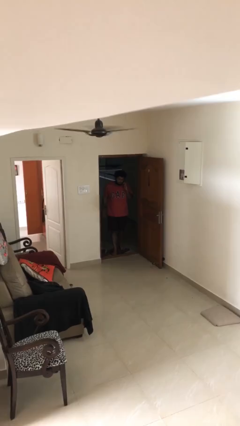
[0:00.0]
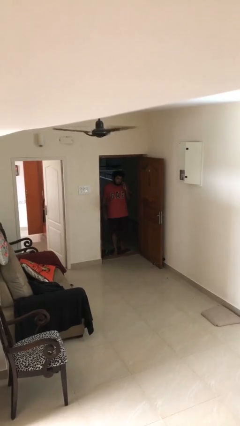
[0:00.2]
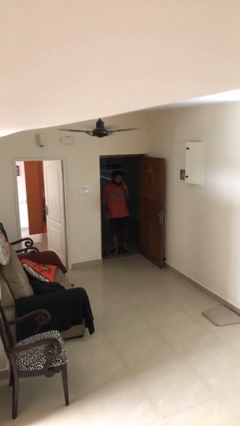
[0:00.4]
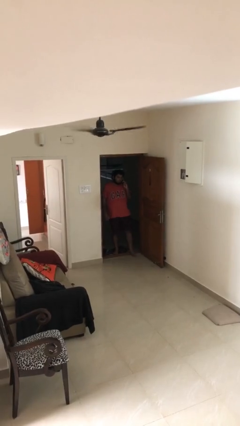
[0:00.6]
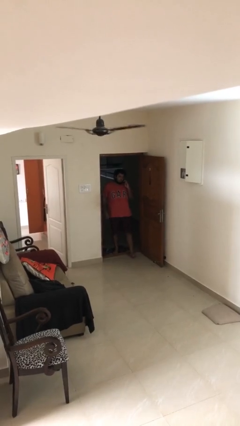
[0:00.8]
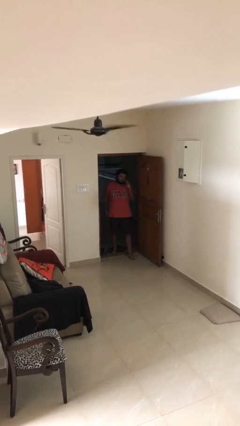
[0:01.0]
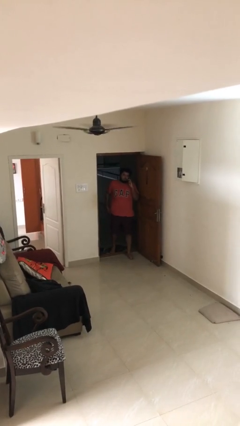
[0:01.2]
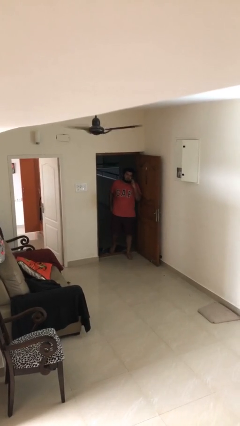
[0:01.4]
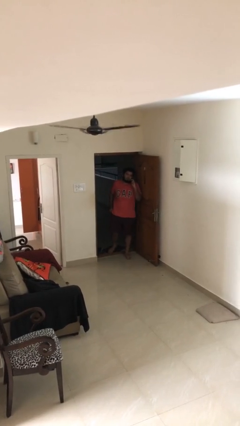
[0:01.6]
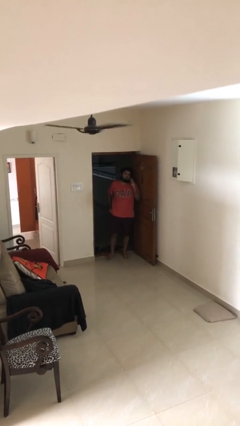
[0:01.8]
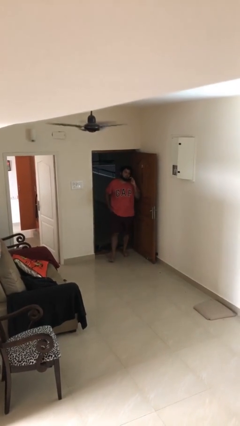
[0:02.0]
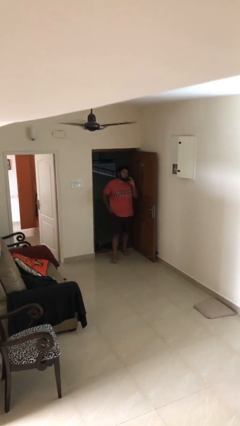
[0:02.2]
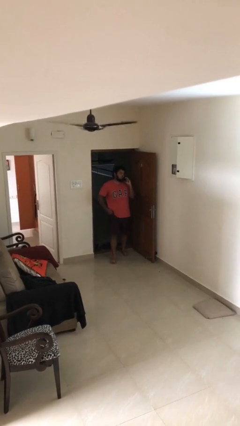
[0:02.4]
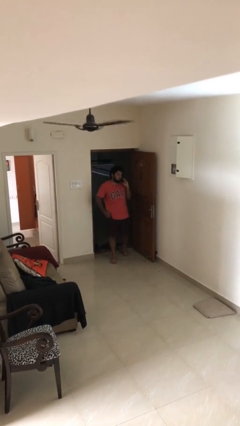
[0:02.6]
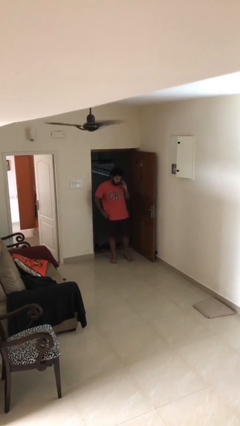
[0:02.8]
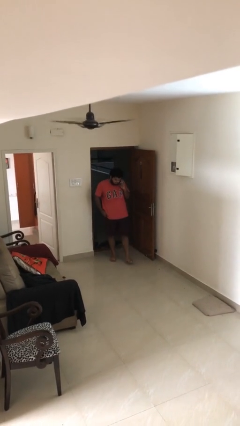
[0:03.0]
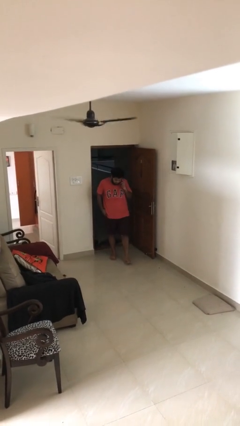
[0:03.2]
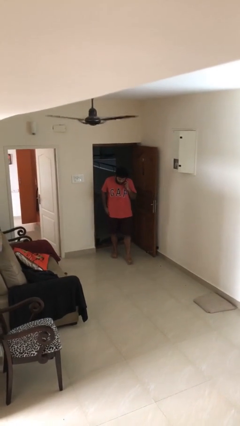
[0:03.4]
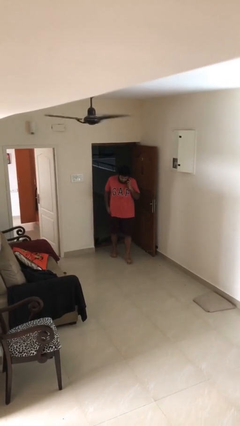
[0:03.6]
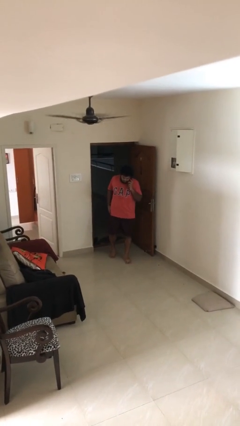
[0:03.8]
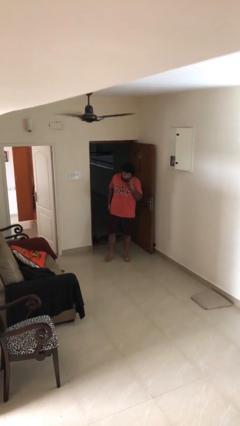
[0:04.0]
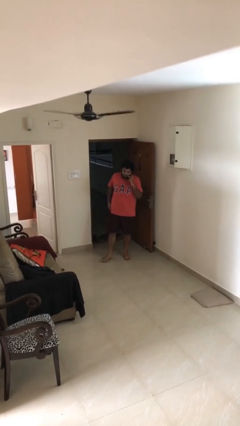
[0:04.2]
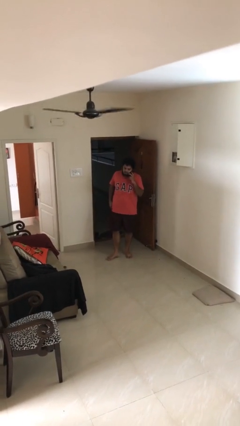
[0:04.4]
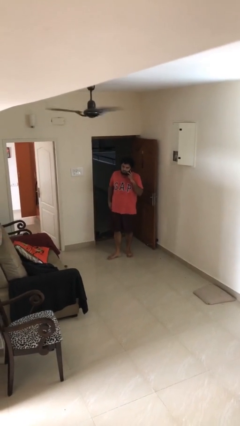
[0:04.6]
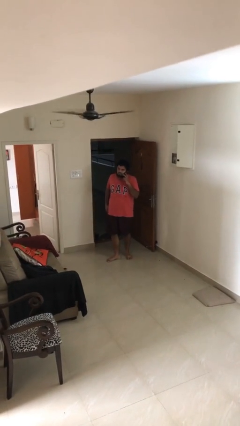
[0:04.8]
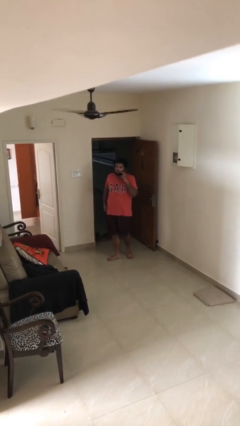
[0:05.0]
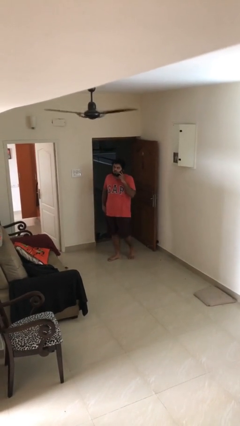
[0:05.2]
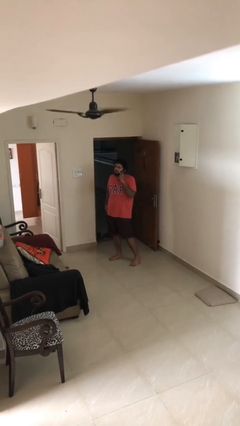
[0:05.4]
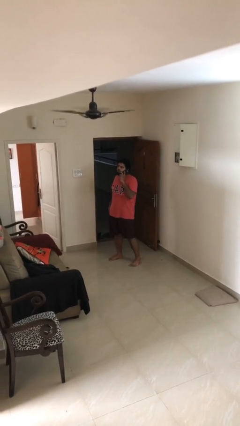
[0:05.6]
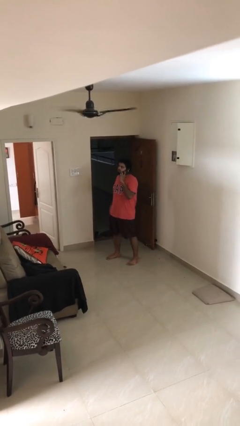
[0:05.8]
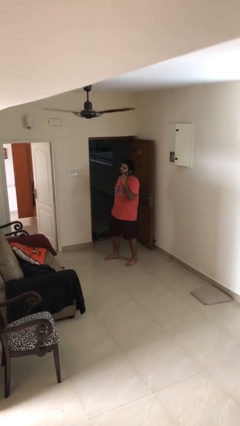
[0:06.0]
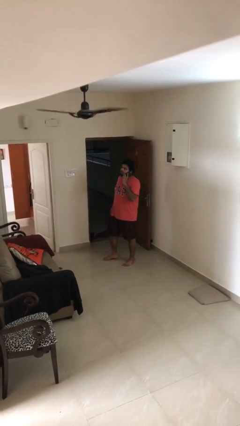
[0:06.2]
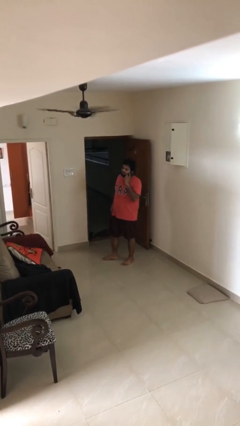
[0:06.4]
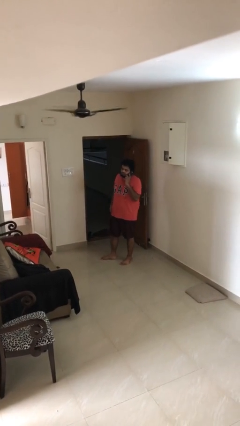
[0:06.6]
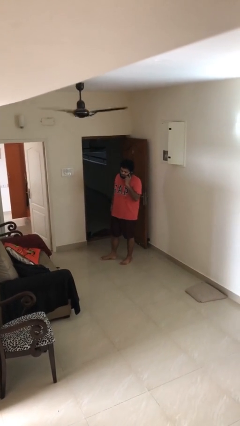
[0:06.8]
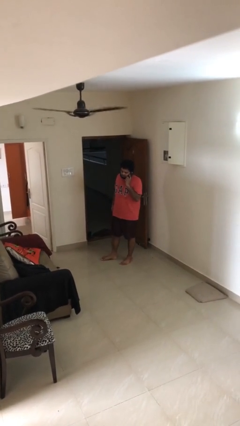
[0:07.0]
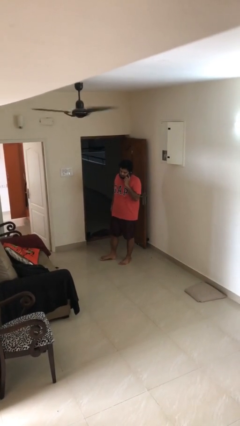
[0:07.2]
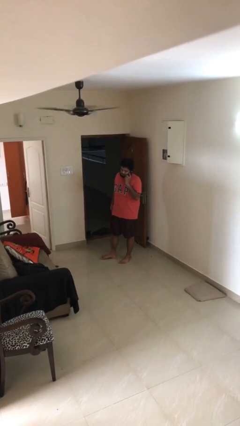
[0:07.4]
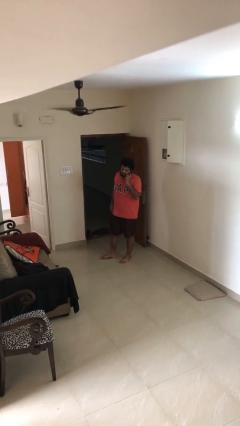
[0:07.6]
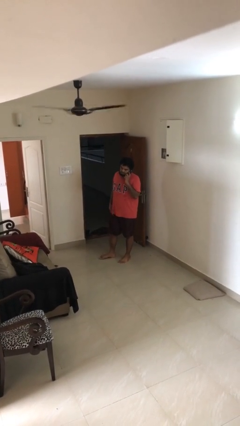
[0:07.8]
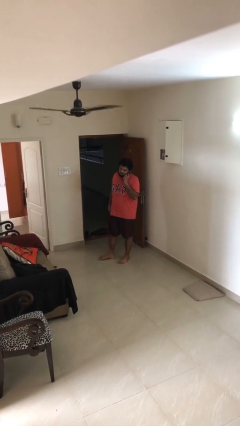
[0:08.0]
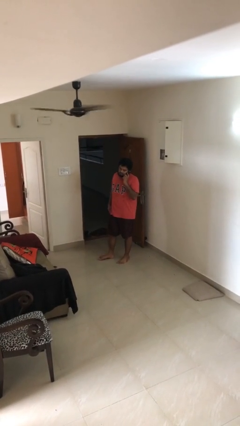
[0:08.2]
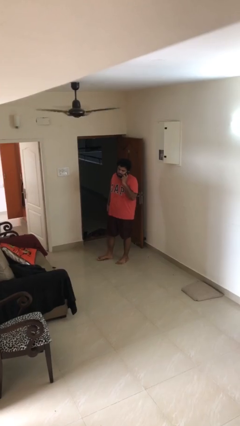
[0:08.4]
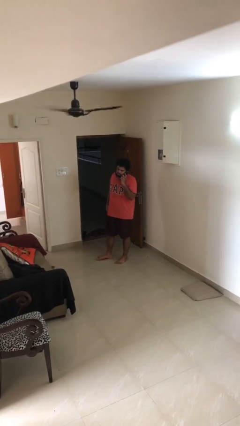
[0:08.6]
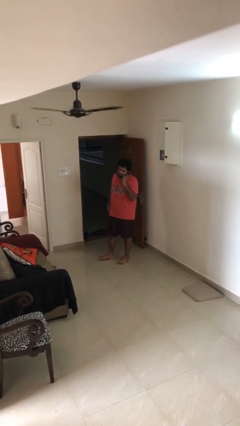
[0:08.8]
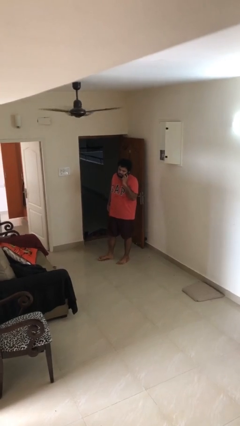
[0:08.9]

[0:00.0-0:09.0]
person enters scene through structure

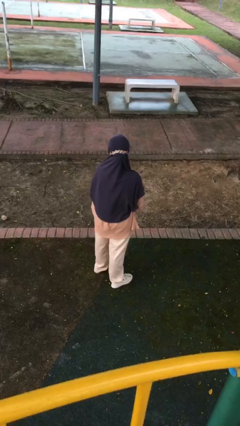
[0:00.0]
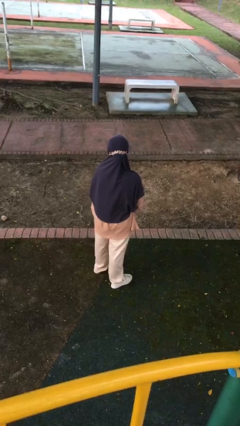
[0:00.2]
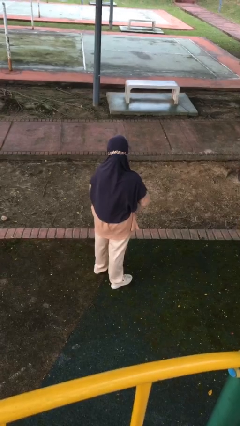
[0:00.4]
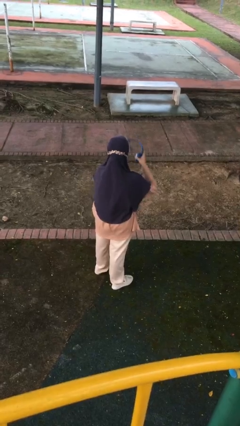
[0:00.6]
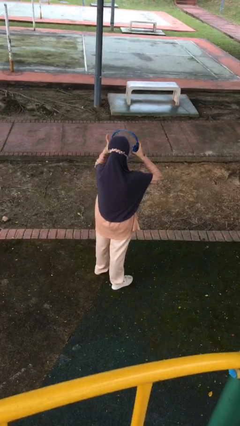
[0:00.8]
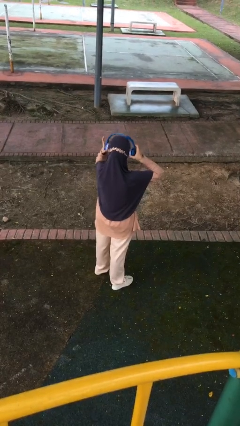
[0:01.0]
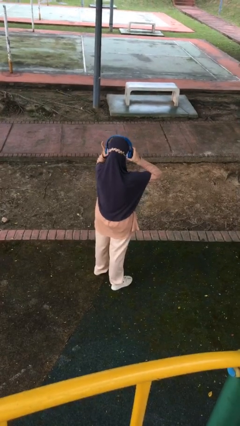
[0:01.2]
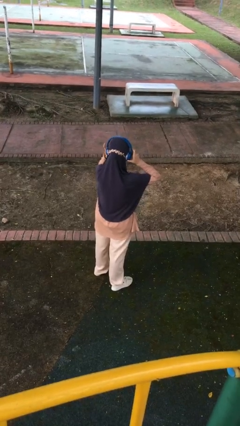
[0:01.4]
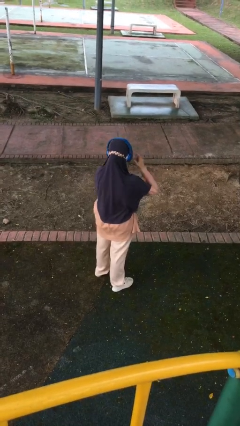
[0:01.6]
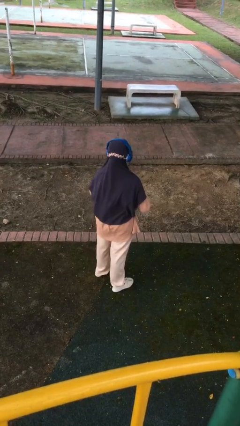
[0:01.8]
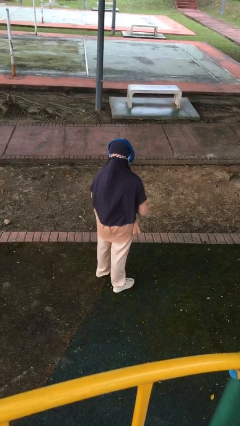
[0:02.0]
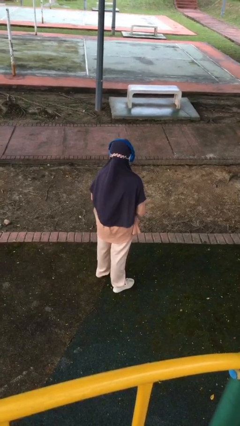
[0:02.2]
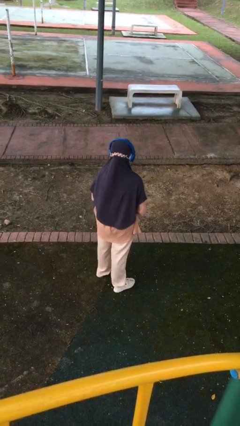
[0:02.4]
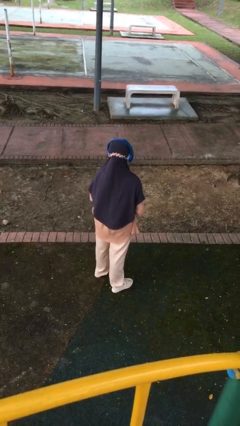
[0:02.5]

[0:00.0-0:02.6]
person puts on headphones

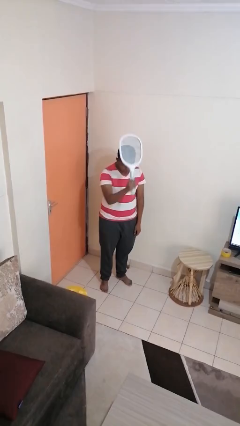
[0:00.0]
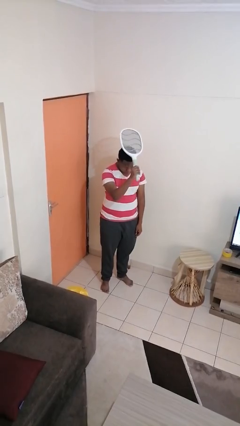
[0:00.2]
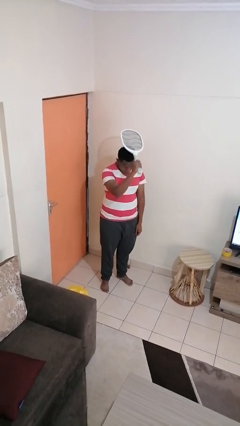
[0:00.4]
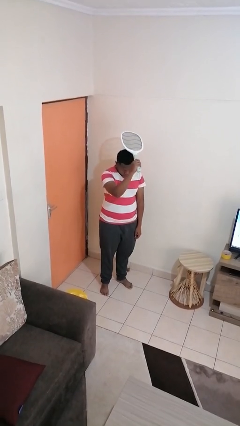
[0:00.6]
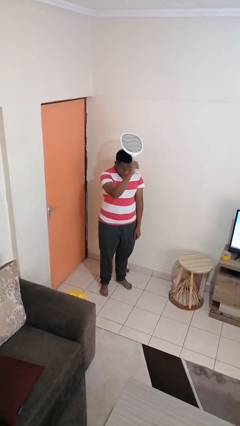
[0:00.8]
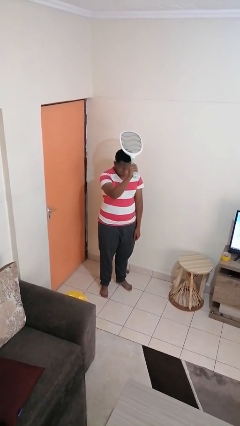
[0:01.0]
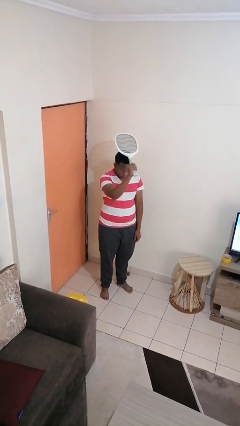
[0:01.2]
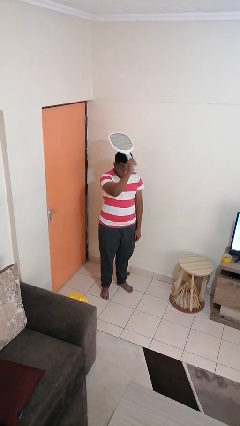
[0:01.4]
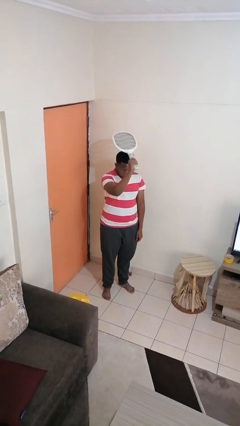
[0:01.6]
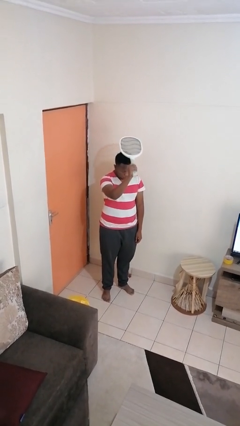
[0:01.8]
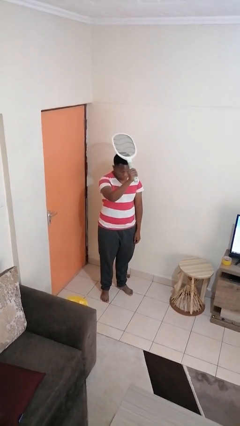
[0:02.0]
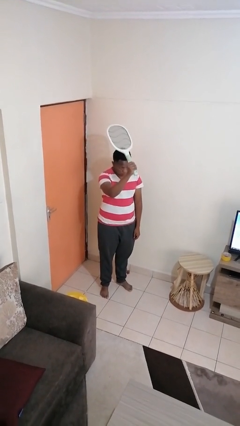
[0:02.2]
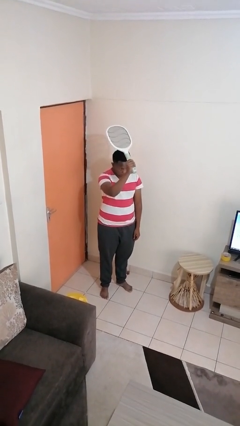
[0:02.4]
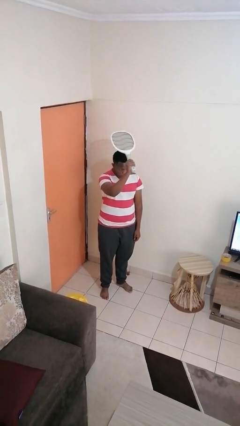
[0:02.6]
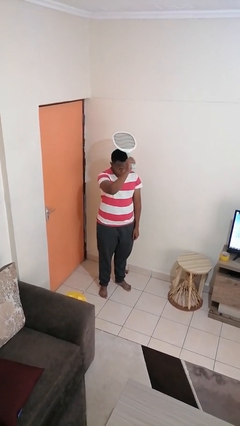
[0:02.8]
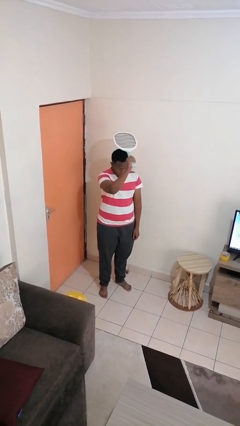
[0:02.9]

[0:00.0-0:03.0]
person holds object above head

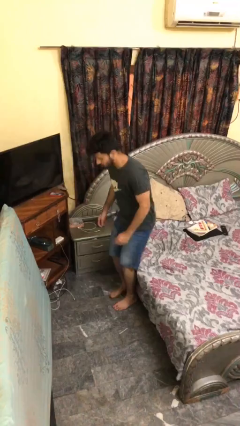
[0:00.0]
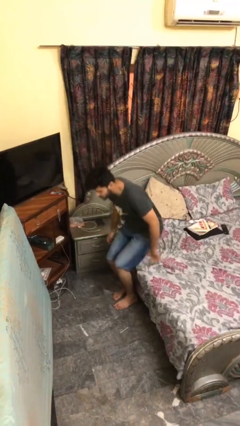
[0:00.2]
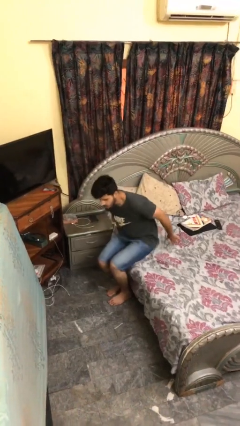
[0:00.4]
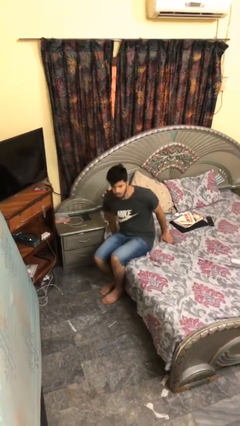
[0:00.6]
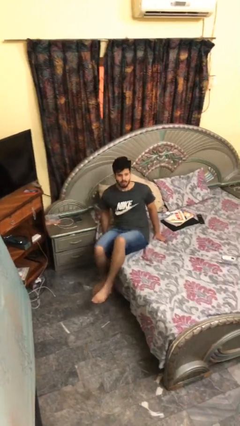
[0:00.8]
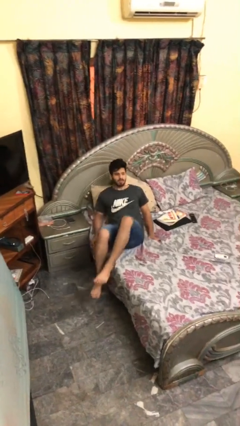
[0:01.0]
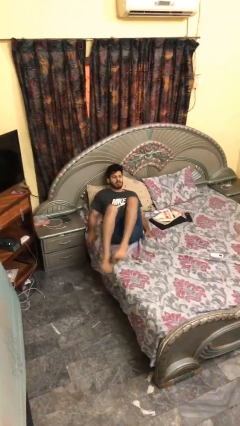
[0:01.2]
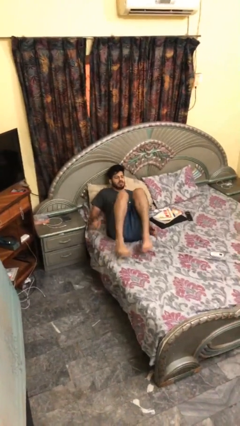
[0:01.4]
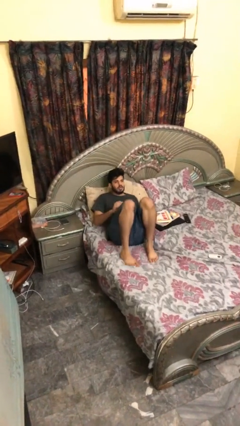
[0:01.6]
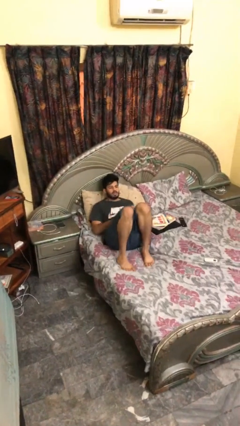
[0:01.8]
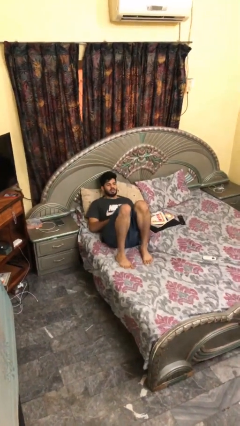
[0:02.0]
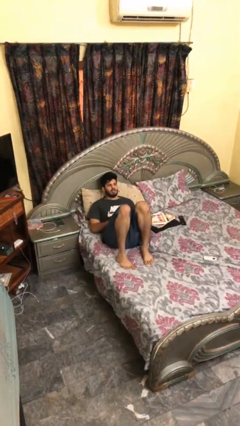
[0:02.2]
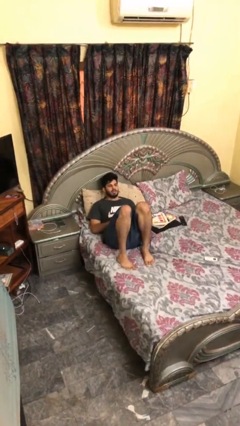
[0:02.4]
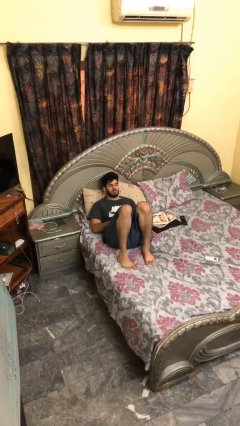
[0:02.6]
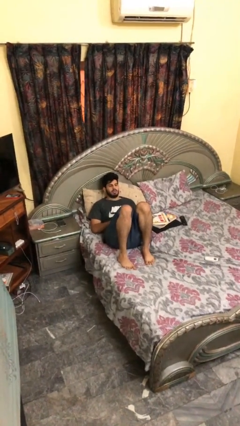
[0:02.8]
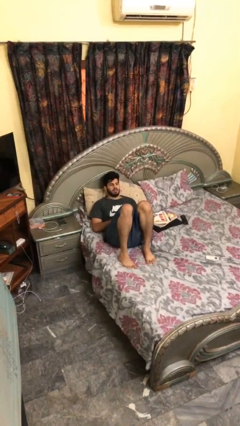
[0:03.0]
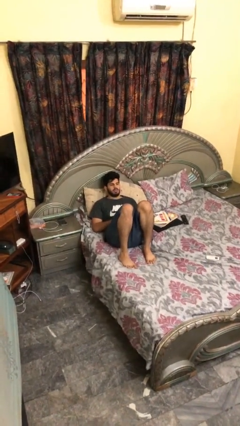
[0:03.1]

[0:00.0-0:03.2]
person lies down on bed
